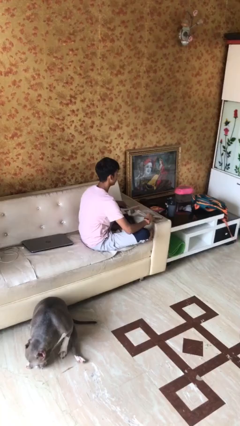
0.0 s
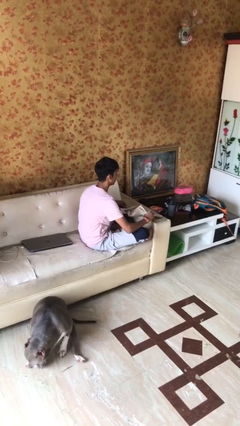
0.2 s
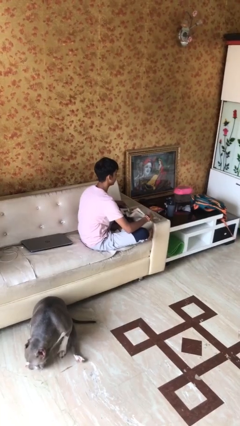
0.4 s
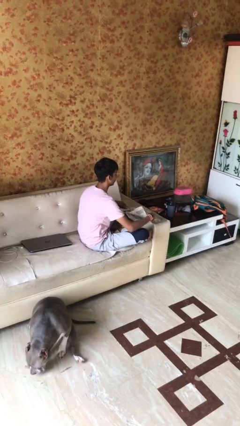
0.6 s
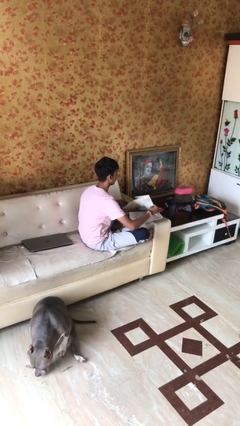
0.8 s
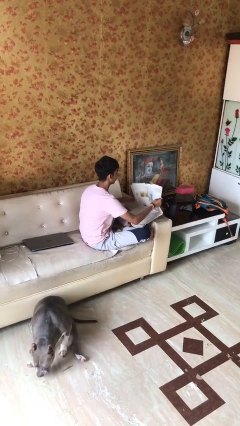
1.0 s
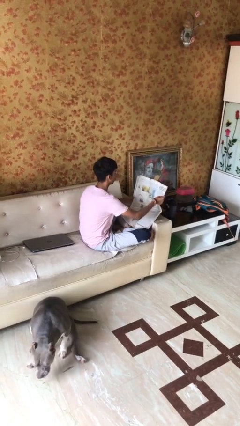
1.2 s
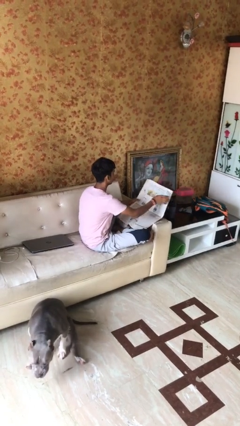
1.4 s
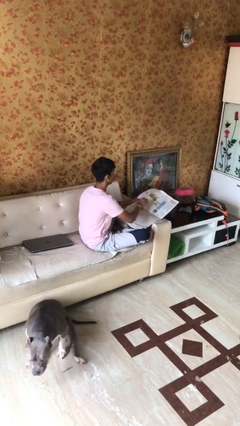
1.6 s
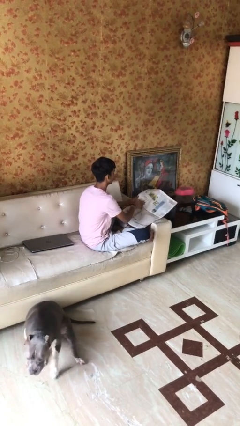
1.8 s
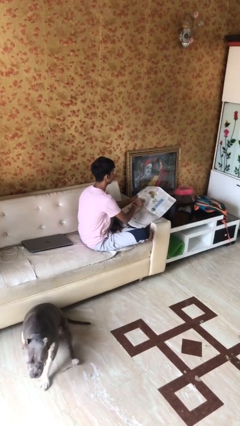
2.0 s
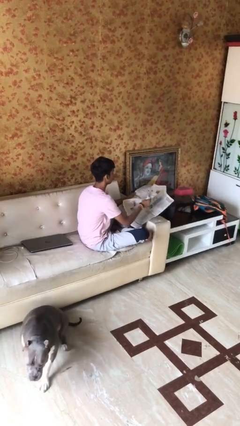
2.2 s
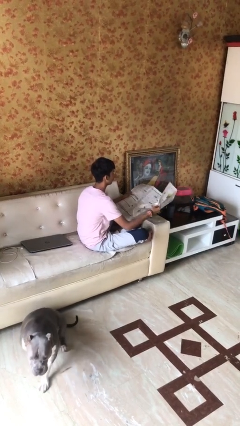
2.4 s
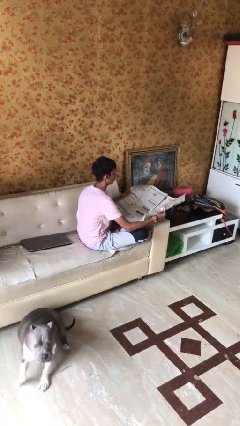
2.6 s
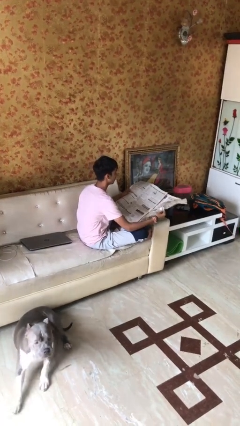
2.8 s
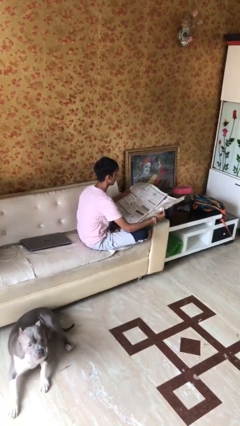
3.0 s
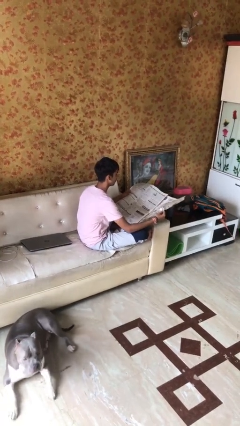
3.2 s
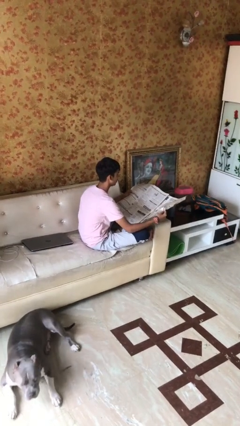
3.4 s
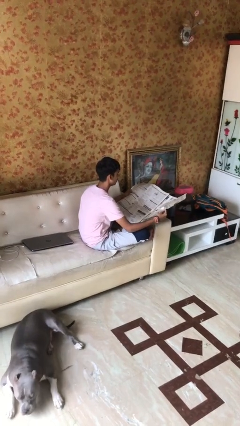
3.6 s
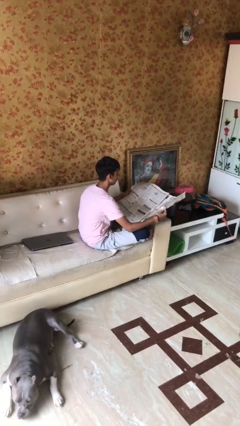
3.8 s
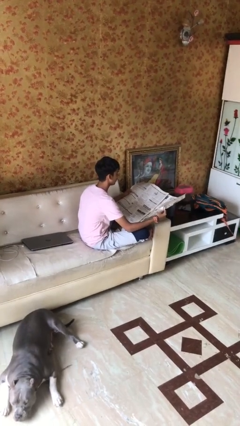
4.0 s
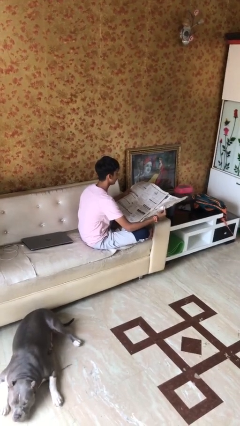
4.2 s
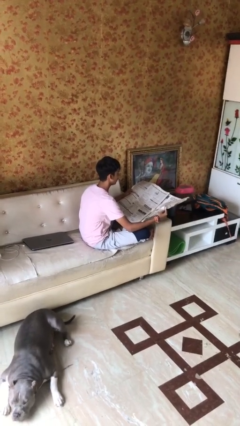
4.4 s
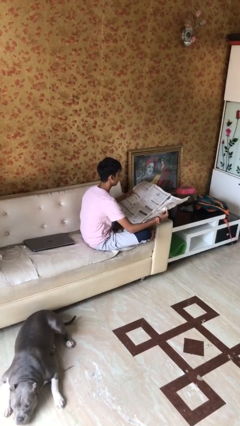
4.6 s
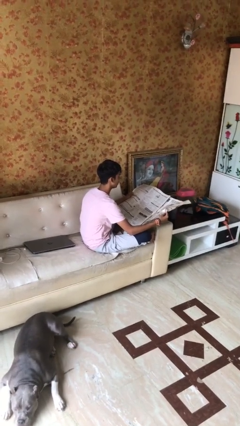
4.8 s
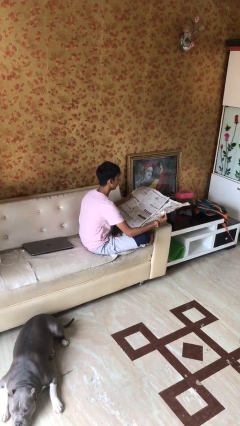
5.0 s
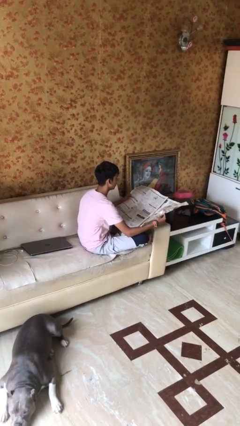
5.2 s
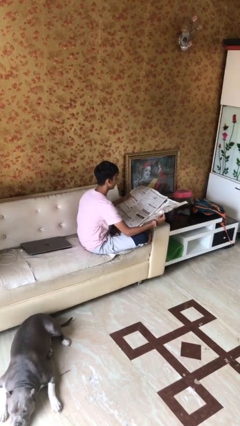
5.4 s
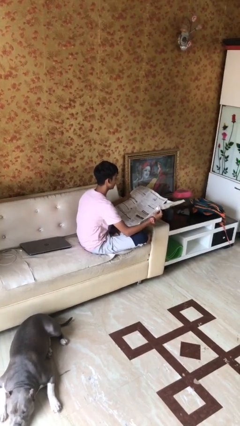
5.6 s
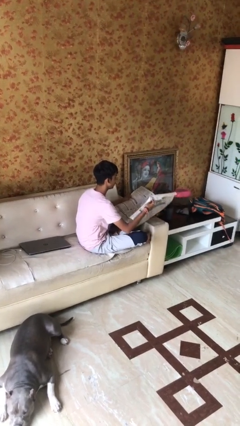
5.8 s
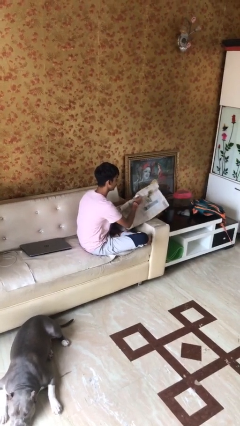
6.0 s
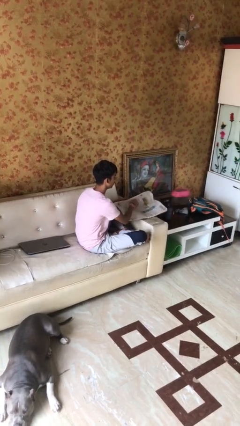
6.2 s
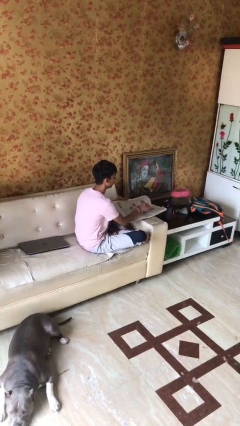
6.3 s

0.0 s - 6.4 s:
person reads newspaper

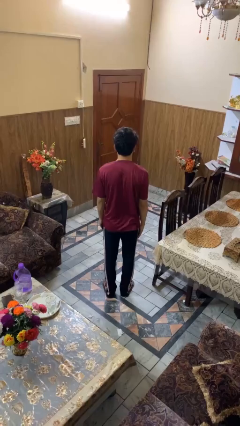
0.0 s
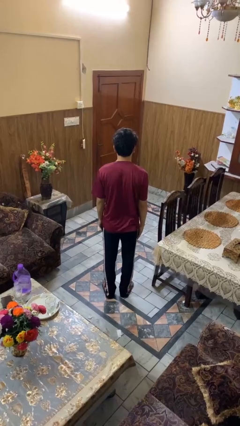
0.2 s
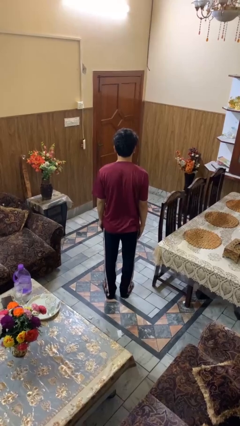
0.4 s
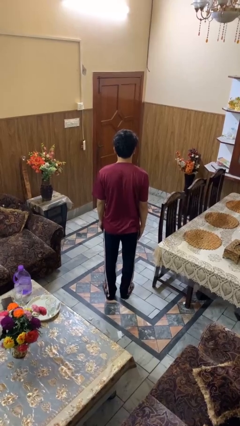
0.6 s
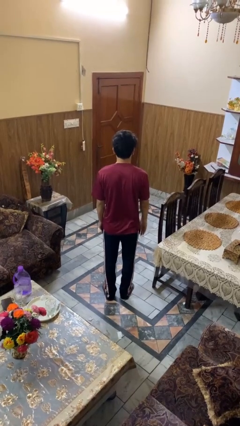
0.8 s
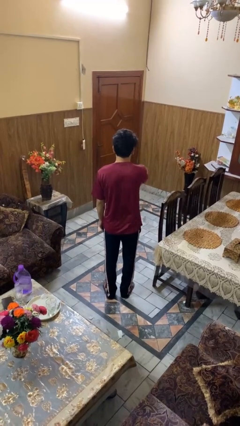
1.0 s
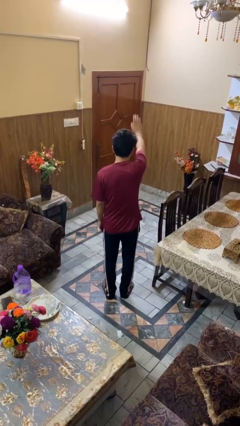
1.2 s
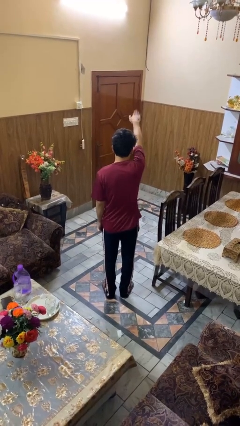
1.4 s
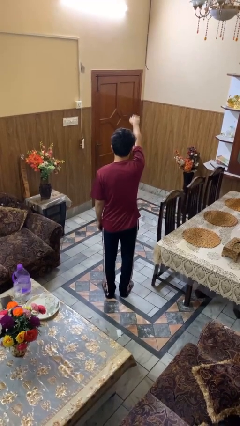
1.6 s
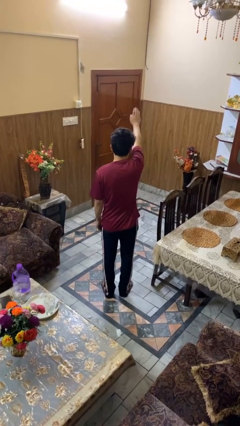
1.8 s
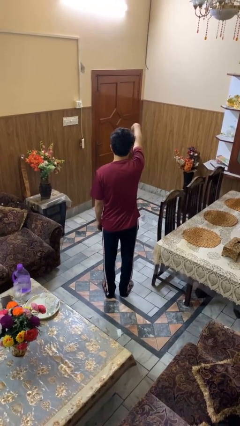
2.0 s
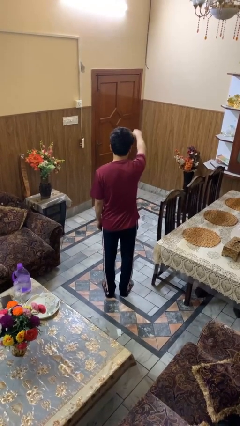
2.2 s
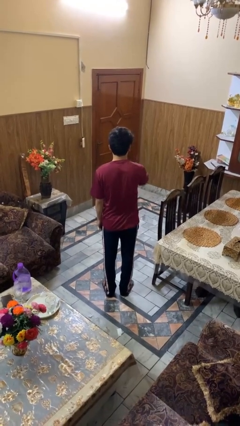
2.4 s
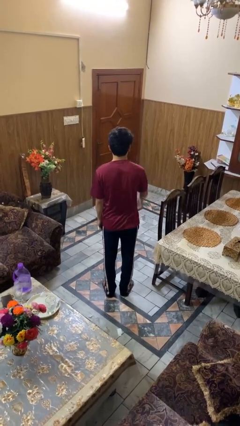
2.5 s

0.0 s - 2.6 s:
person gestures come here

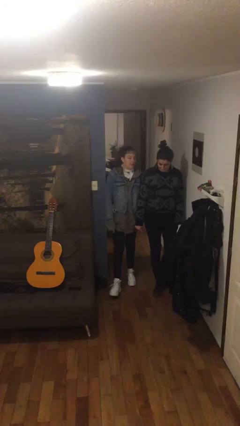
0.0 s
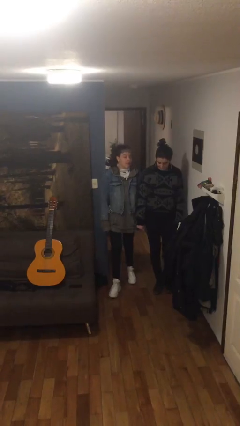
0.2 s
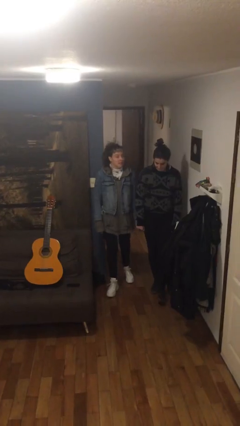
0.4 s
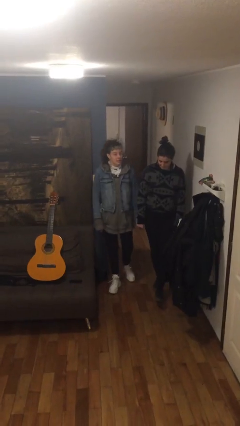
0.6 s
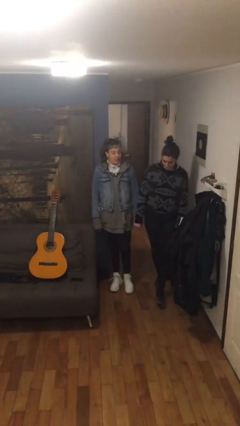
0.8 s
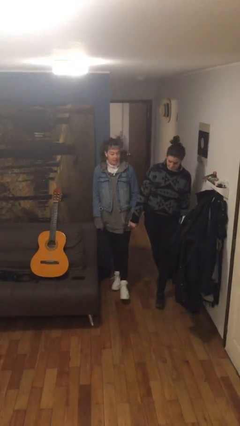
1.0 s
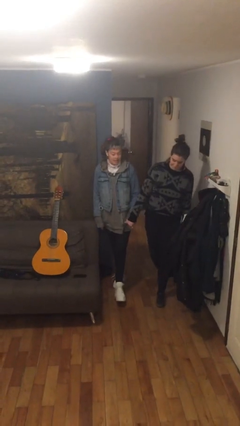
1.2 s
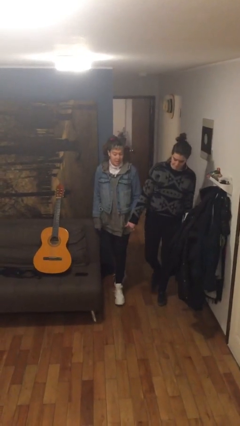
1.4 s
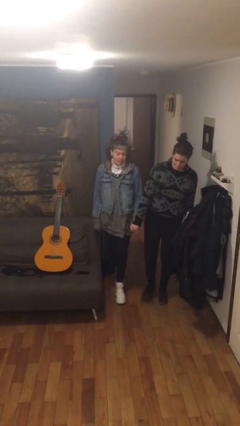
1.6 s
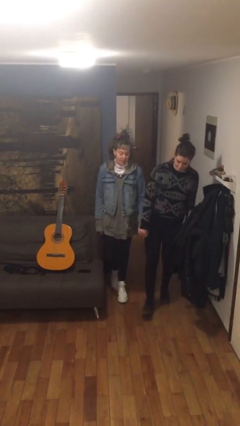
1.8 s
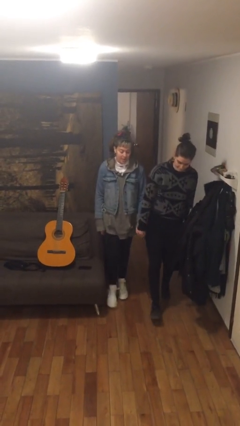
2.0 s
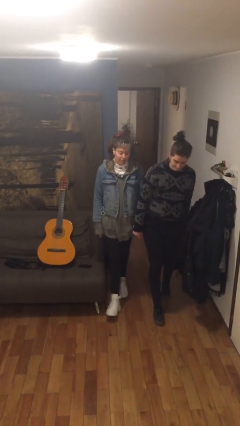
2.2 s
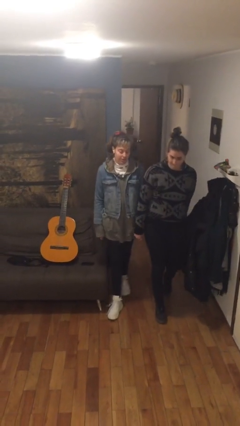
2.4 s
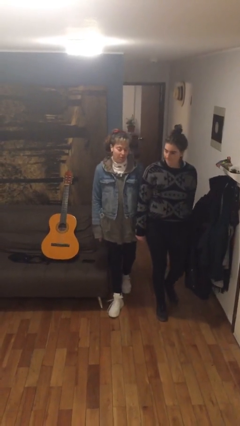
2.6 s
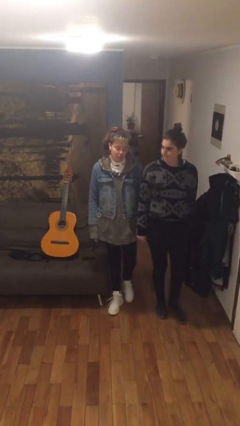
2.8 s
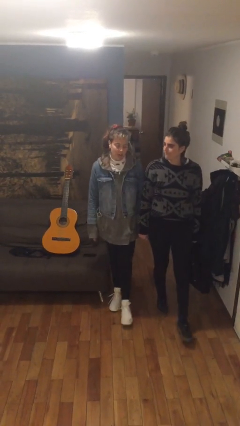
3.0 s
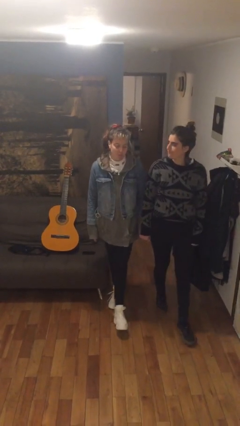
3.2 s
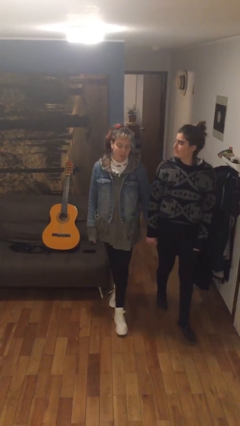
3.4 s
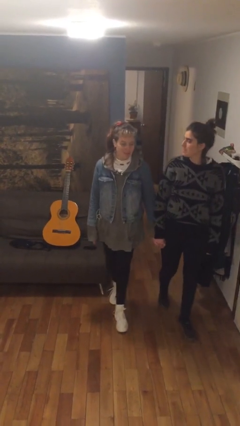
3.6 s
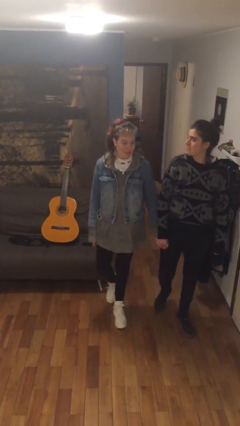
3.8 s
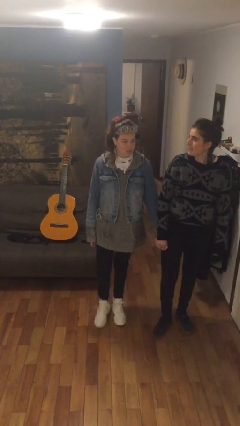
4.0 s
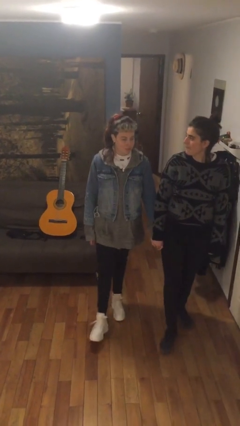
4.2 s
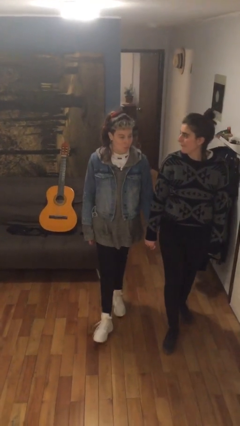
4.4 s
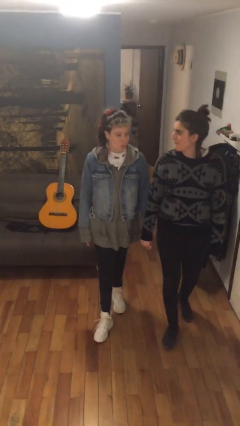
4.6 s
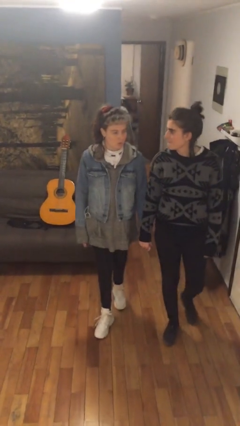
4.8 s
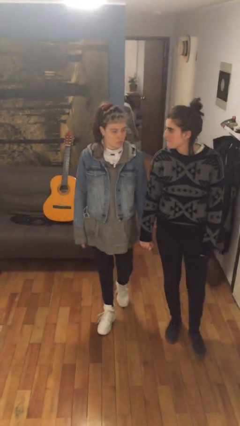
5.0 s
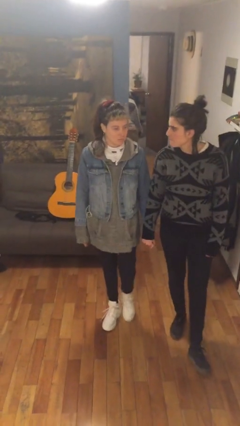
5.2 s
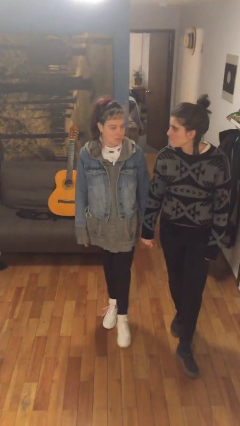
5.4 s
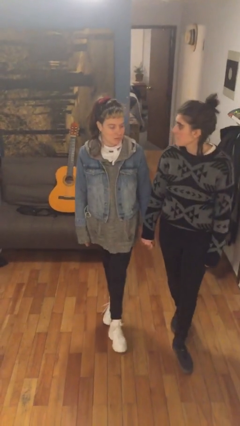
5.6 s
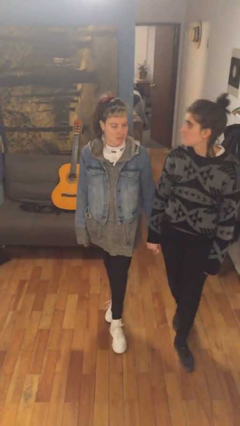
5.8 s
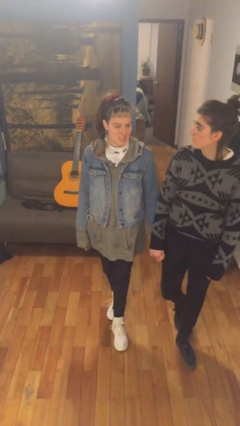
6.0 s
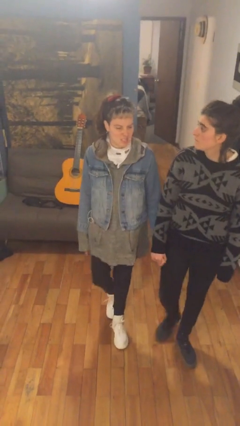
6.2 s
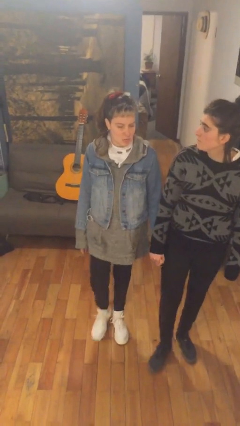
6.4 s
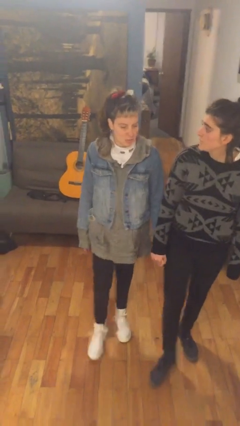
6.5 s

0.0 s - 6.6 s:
person holds hand

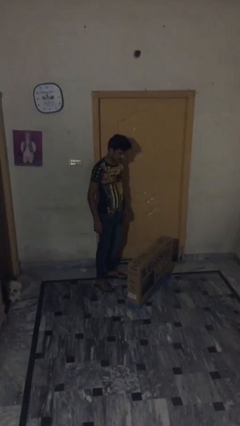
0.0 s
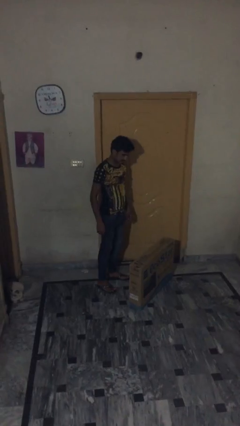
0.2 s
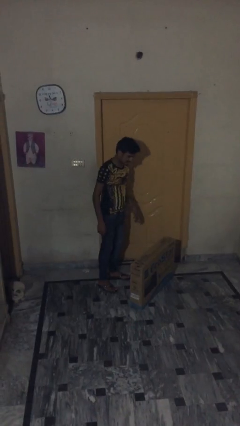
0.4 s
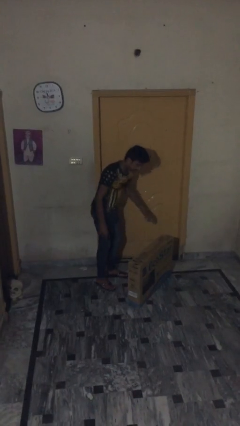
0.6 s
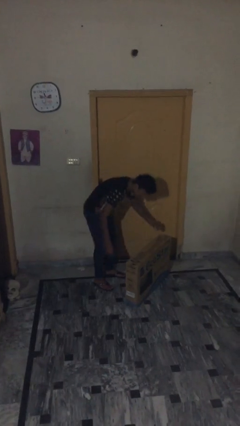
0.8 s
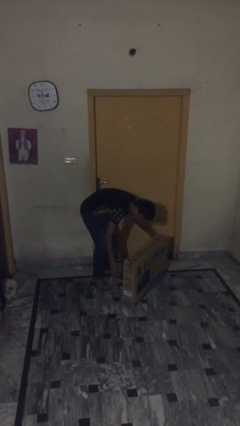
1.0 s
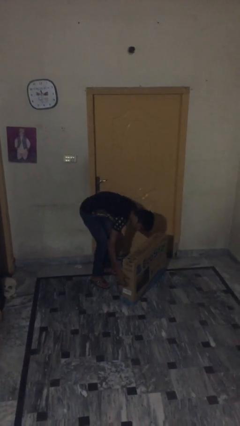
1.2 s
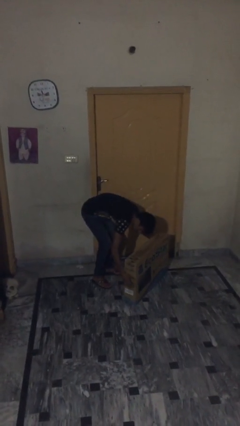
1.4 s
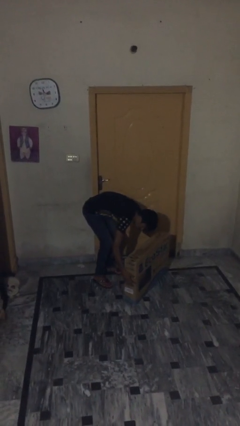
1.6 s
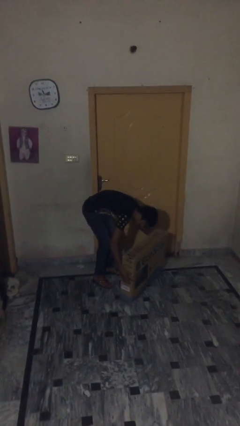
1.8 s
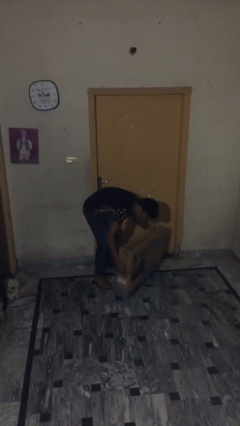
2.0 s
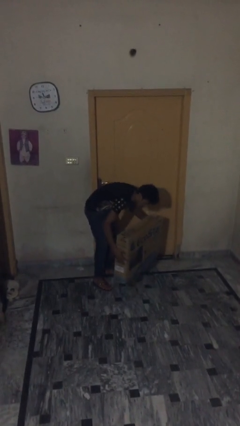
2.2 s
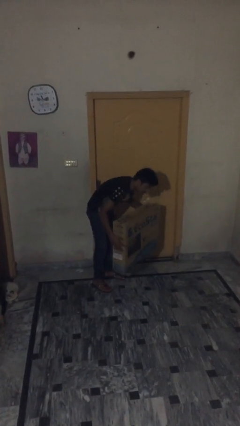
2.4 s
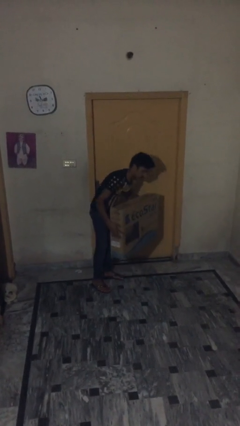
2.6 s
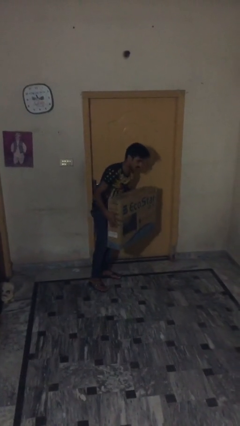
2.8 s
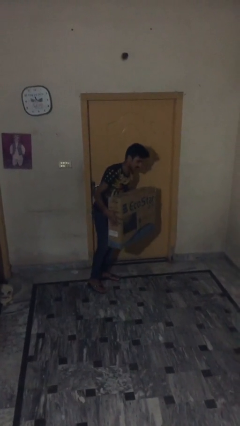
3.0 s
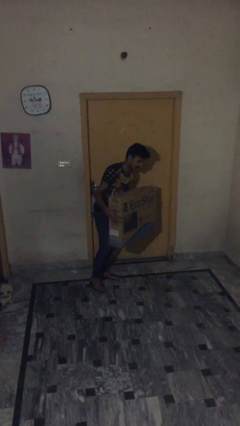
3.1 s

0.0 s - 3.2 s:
person picks up object from floor
